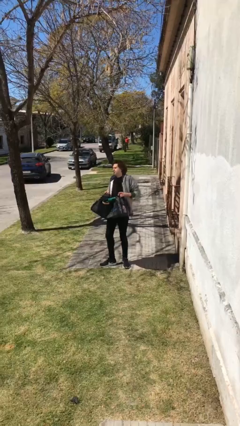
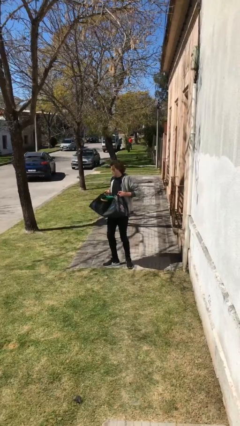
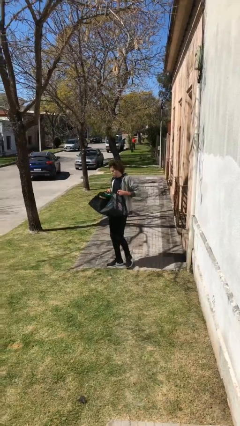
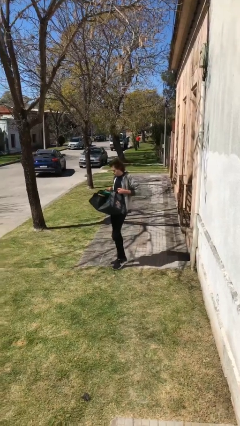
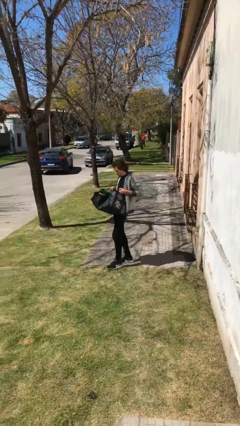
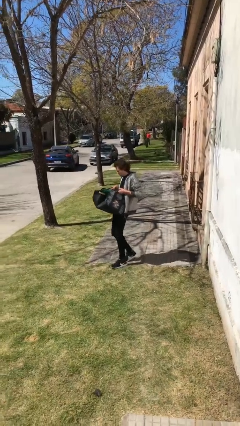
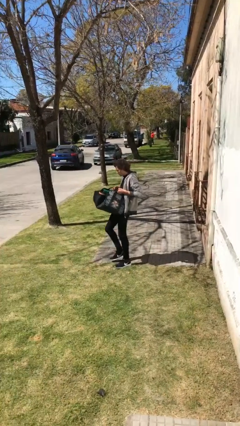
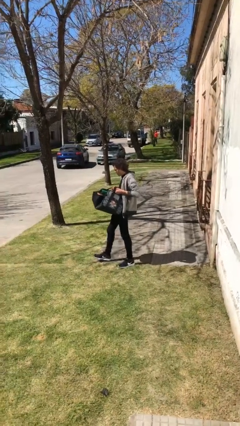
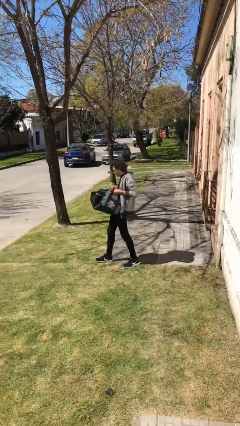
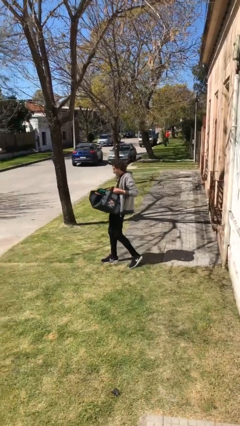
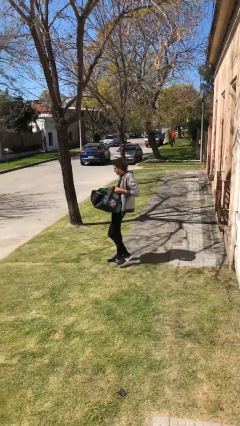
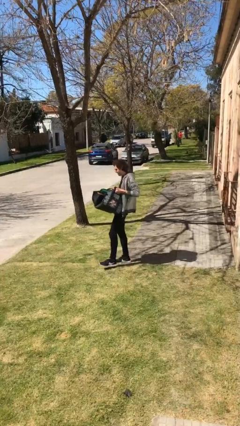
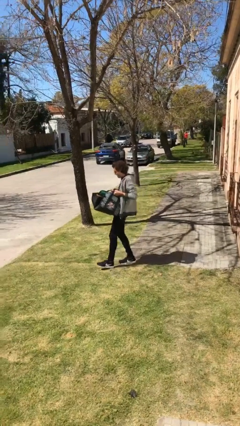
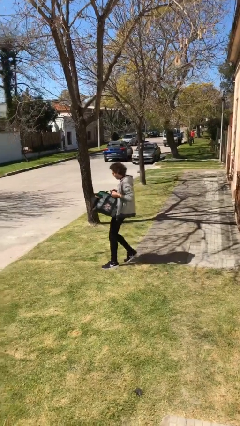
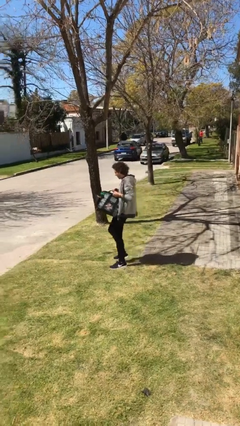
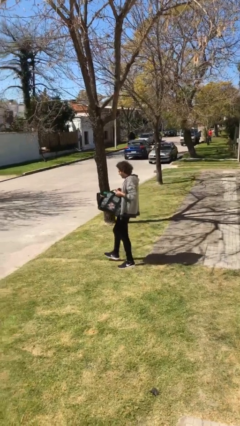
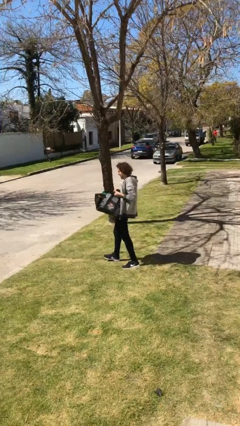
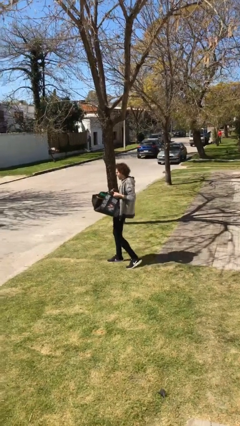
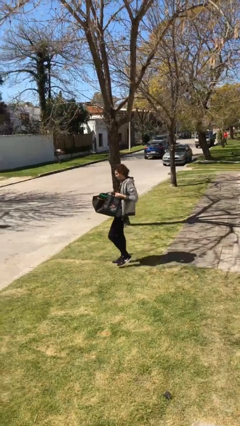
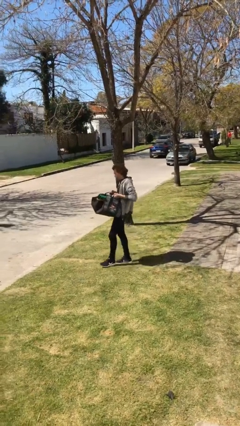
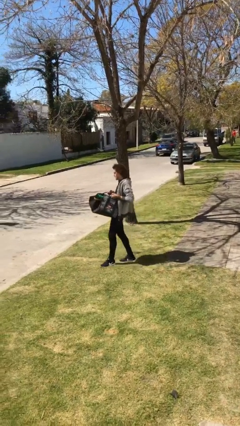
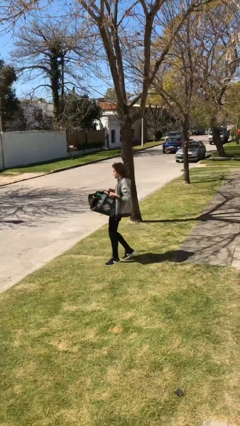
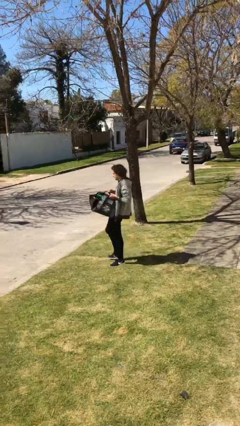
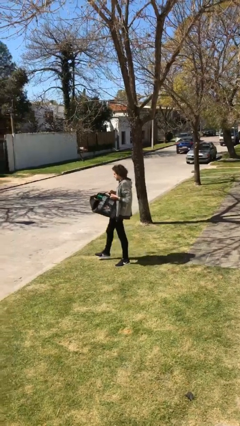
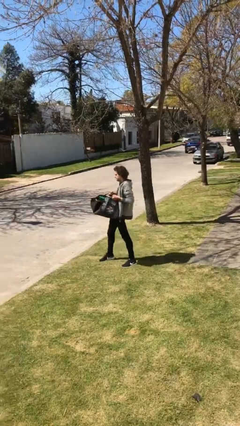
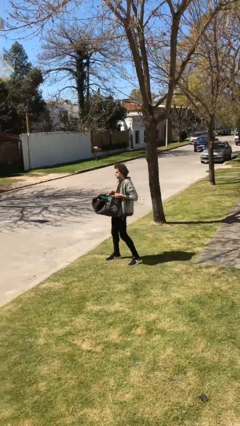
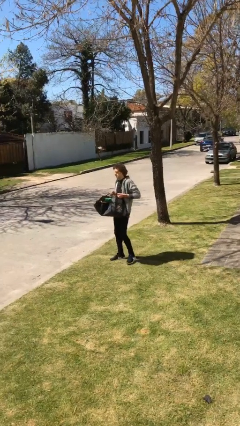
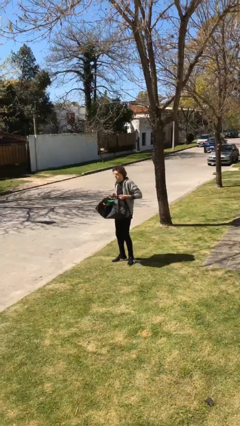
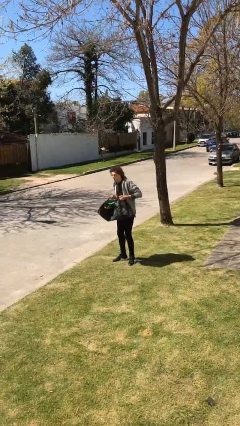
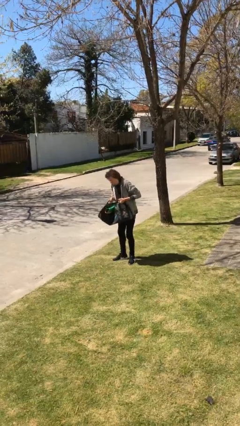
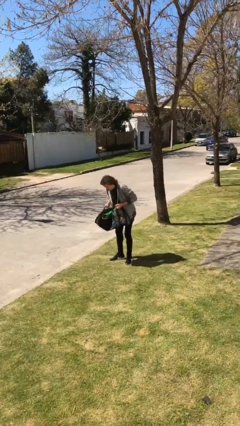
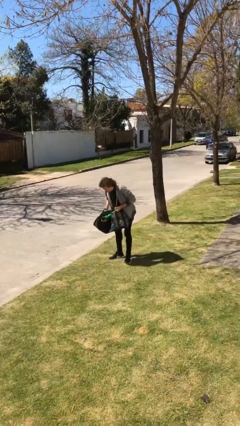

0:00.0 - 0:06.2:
person carries heavy object

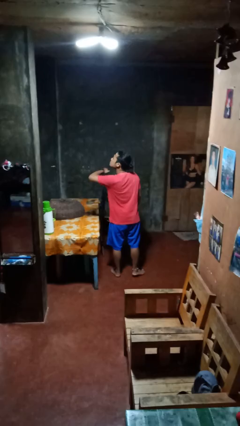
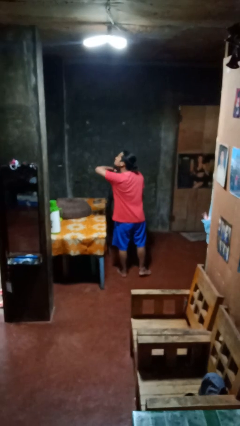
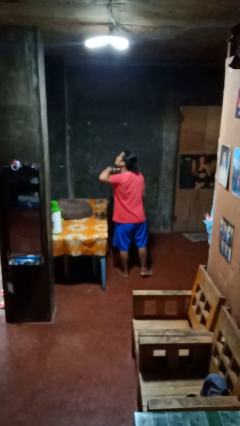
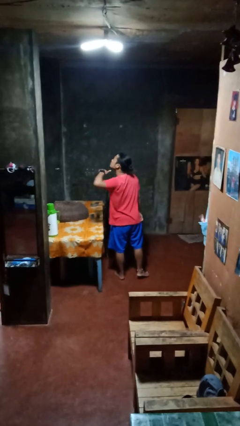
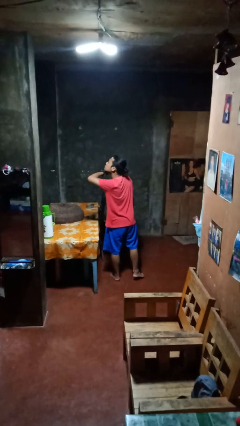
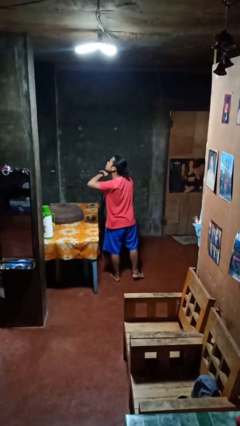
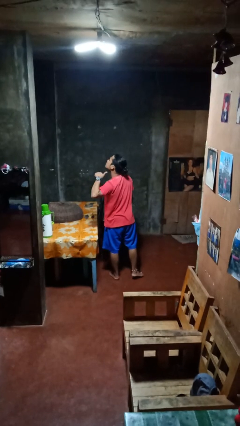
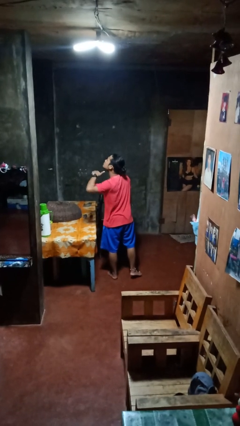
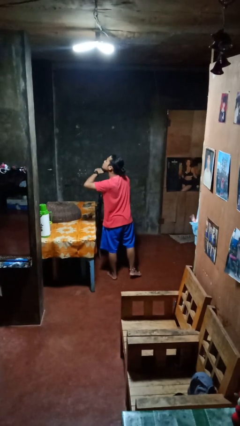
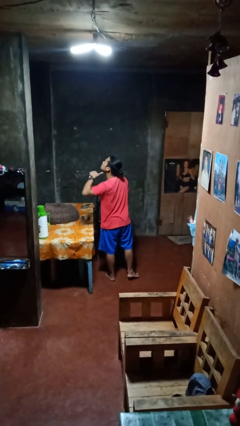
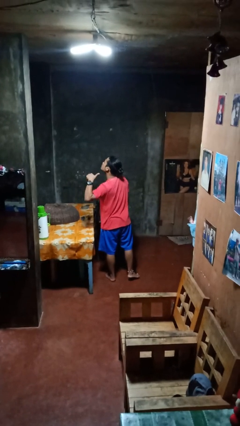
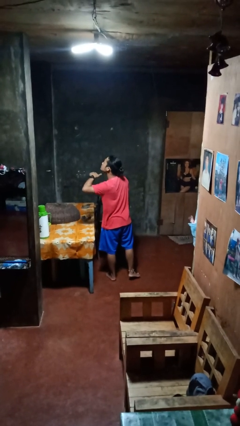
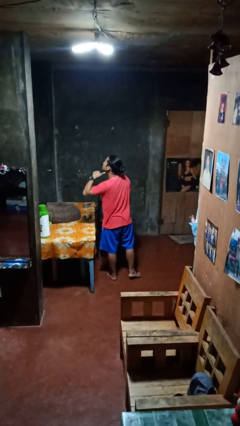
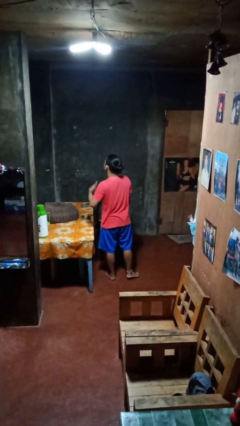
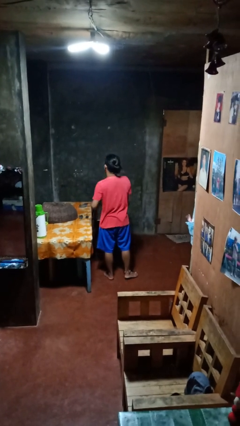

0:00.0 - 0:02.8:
person gestures cut

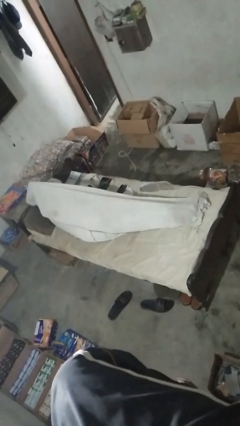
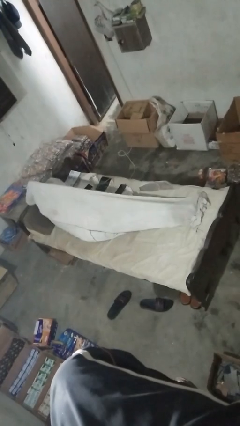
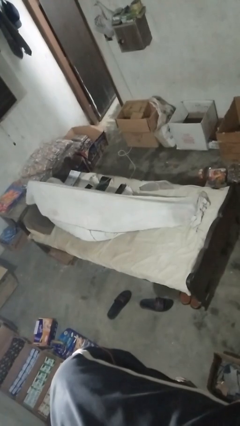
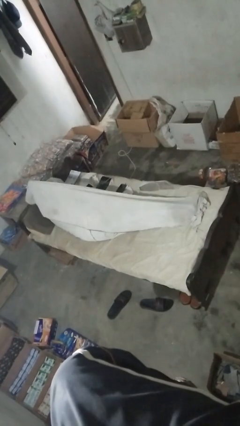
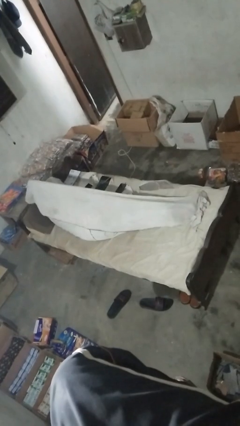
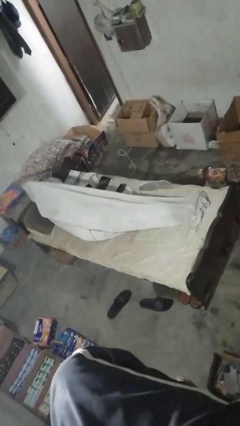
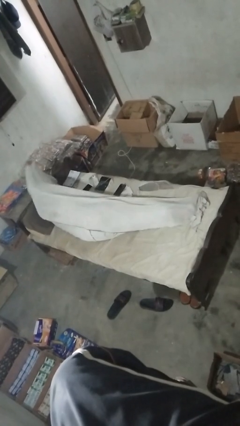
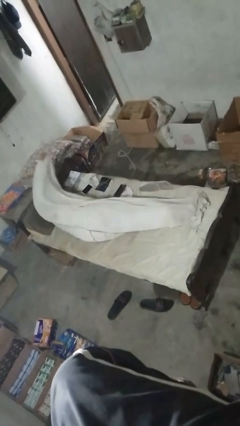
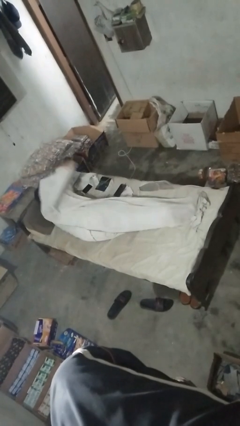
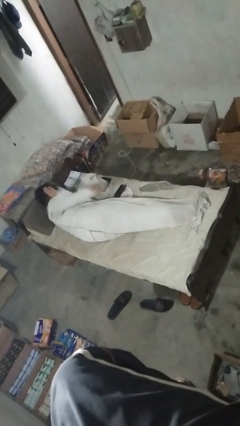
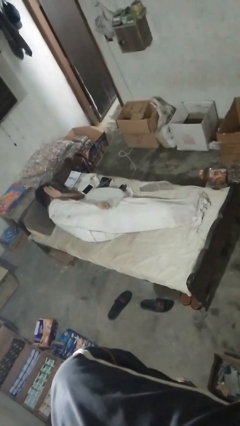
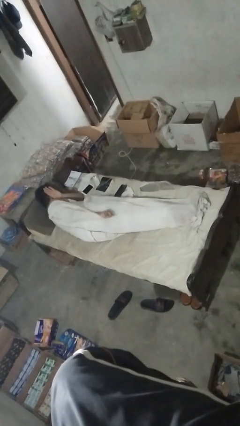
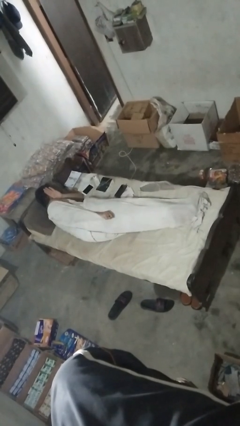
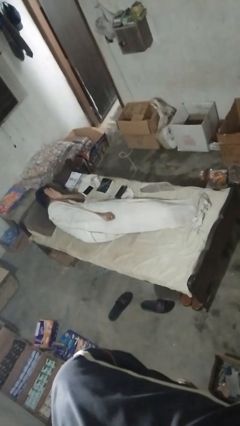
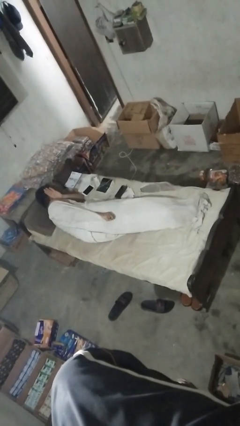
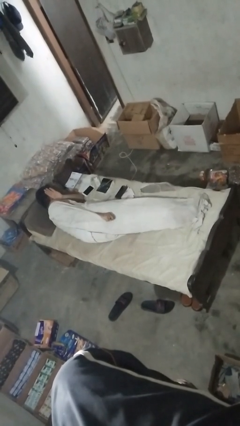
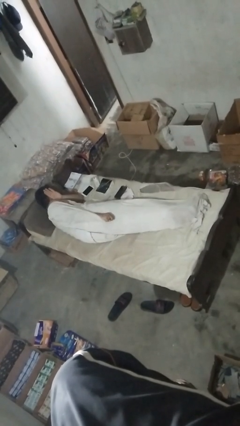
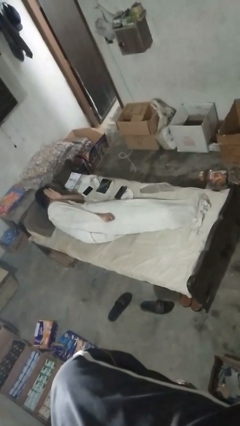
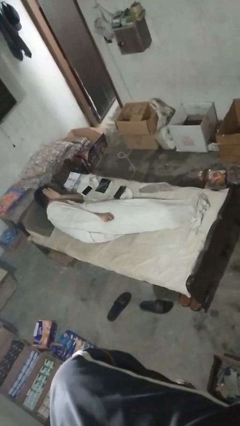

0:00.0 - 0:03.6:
person uncovers with bedsheets

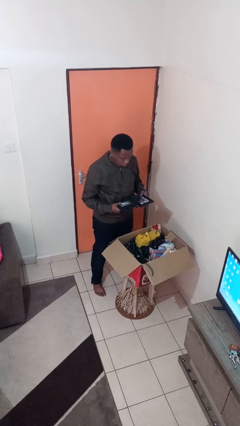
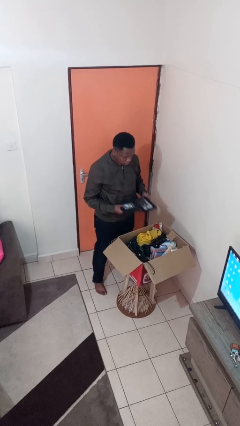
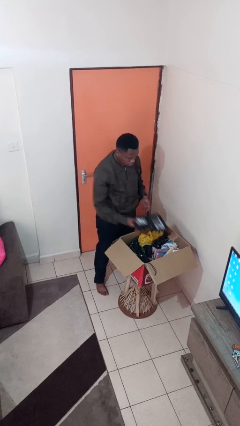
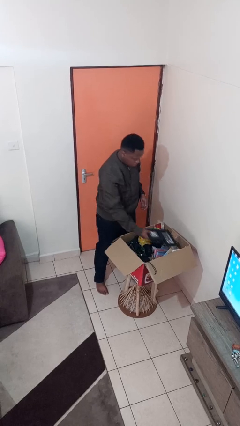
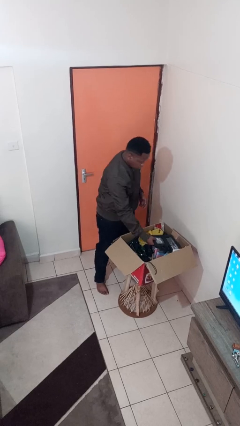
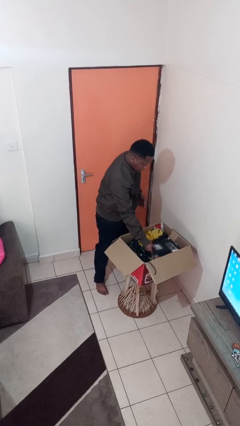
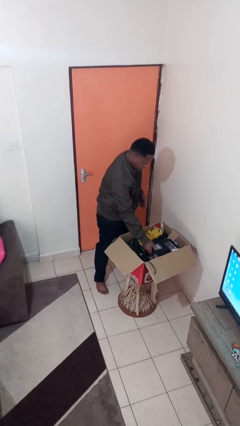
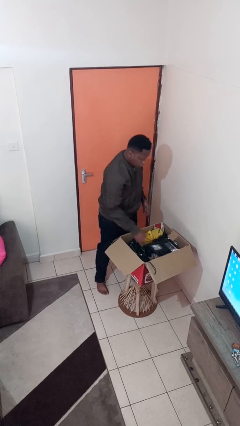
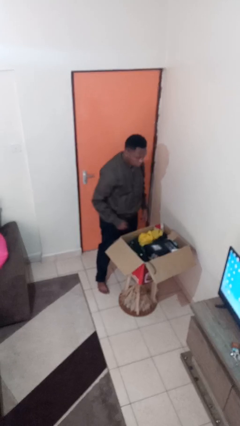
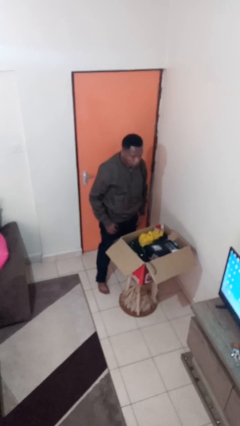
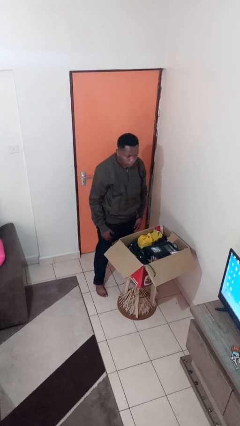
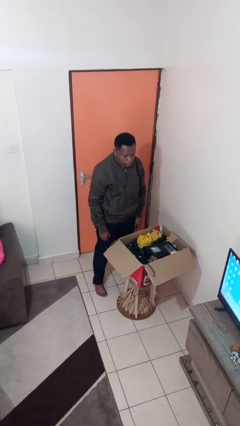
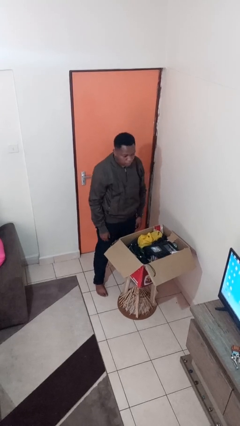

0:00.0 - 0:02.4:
person puts object into box

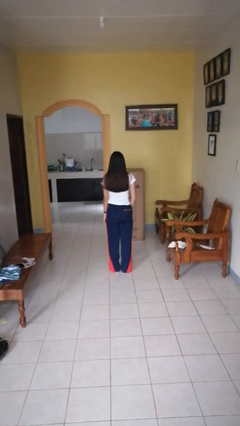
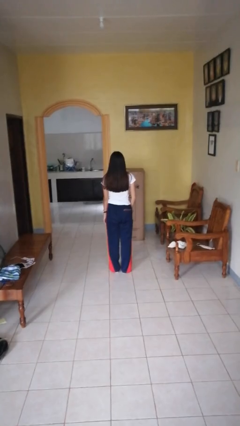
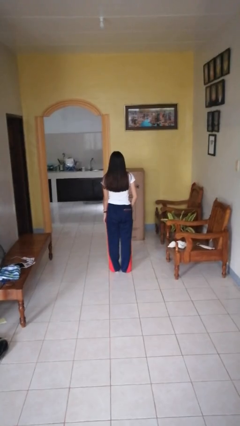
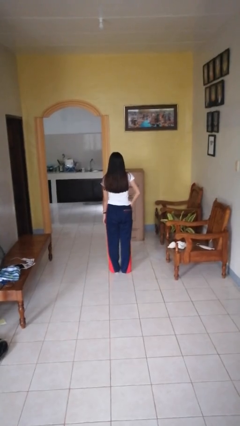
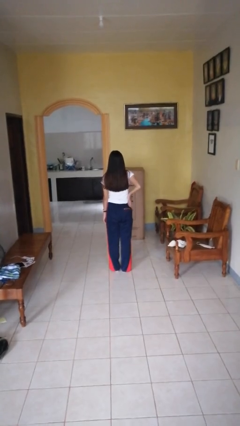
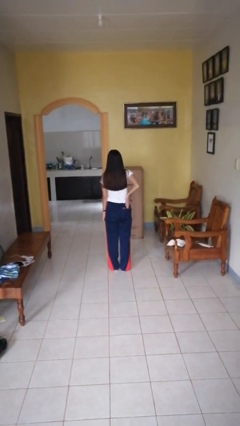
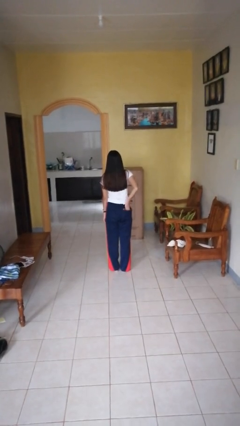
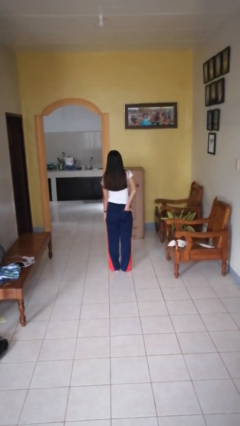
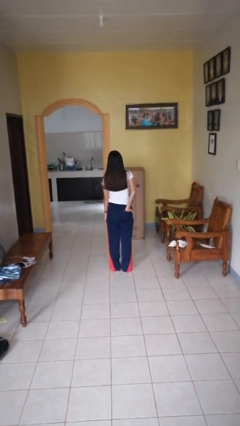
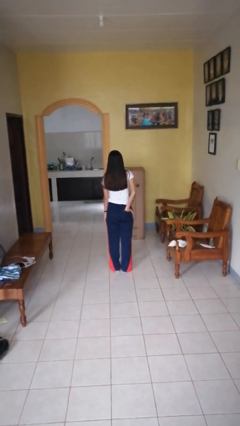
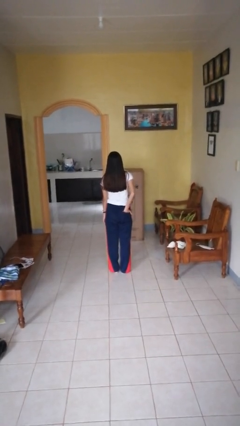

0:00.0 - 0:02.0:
person puts hands in back pockets

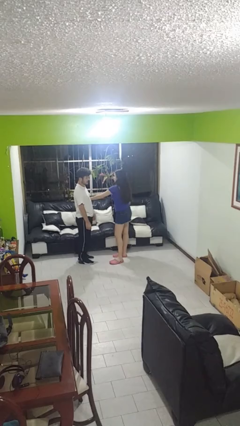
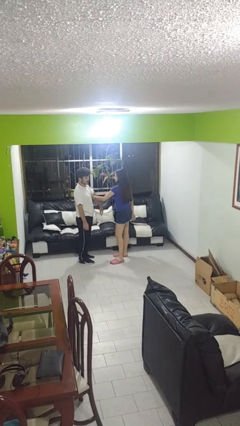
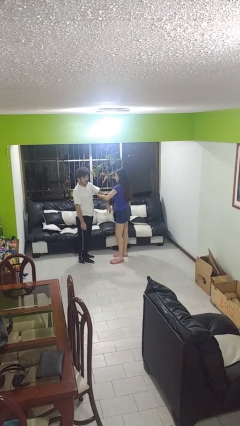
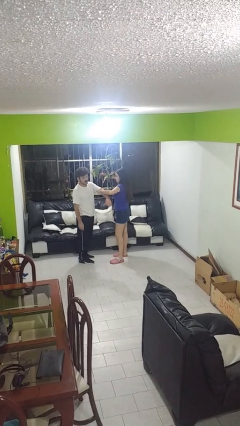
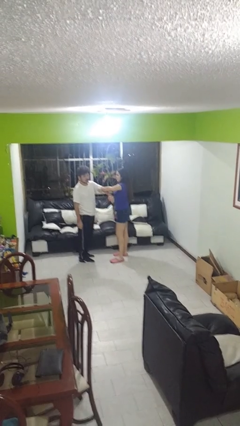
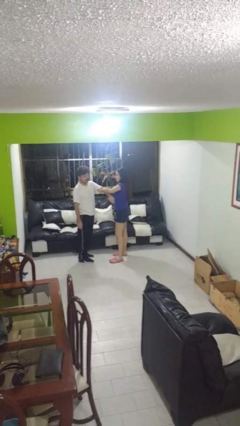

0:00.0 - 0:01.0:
person grabs person by bicep
